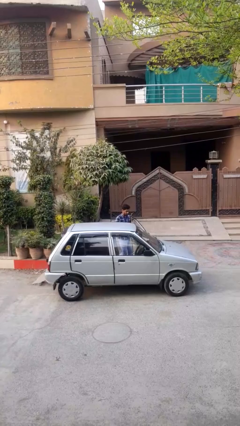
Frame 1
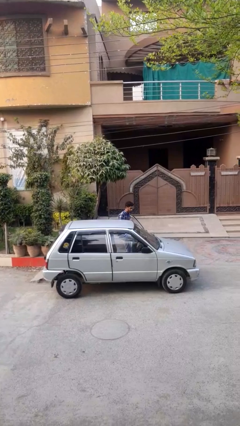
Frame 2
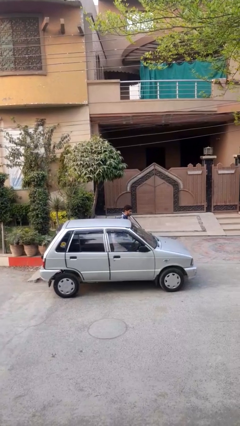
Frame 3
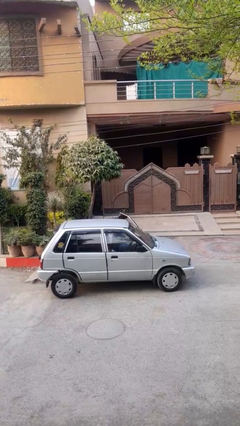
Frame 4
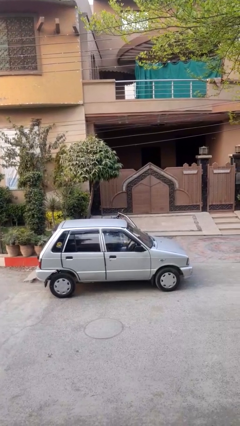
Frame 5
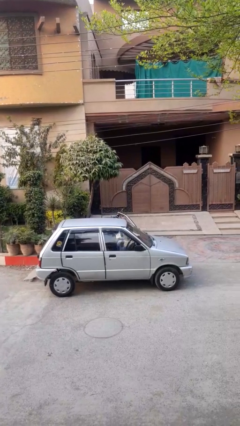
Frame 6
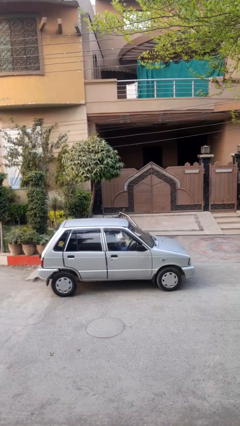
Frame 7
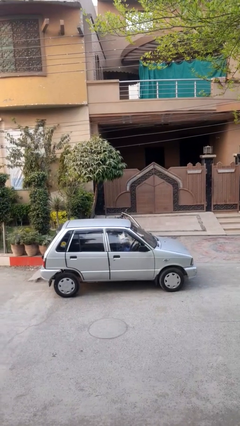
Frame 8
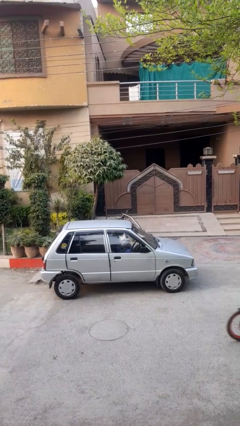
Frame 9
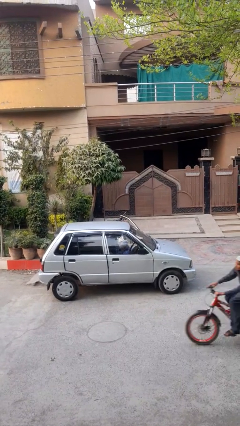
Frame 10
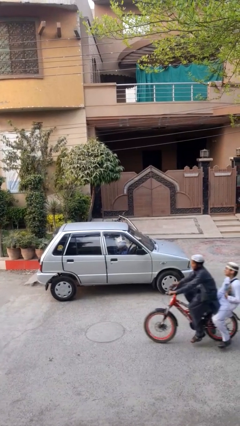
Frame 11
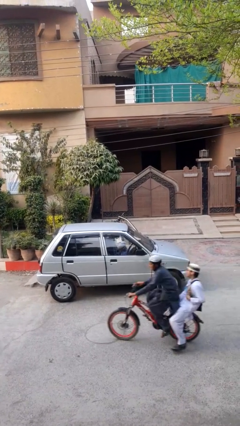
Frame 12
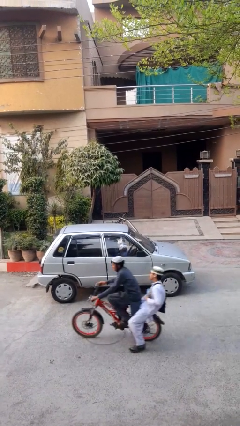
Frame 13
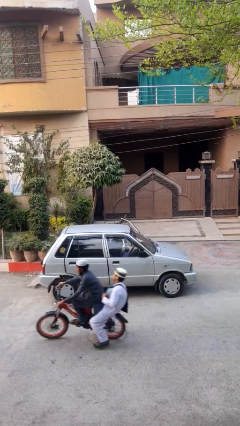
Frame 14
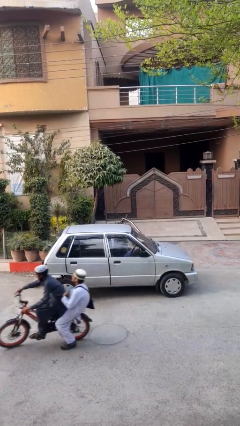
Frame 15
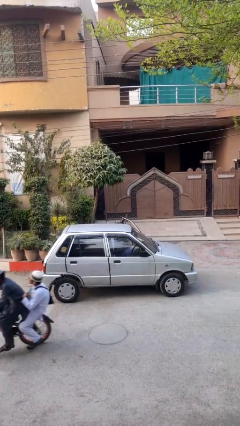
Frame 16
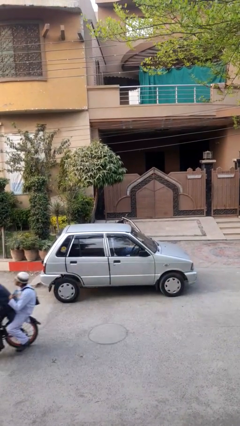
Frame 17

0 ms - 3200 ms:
person enters car

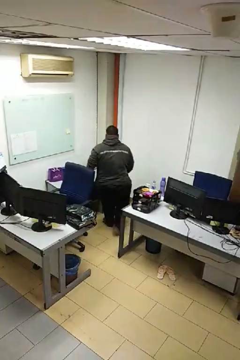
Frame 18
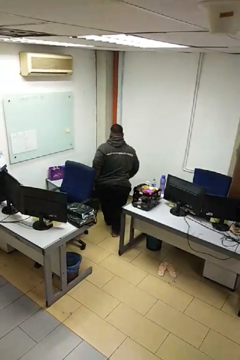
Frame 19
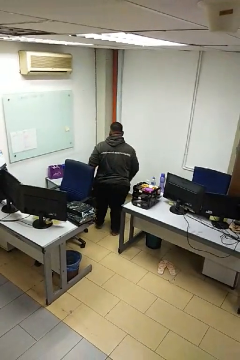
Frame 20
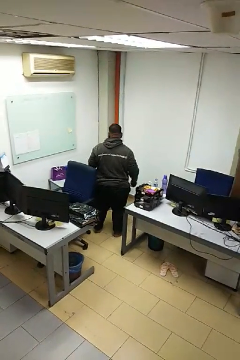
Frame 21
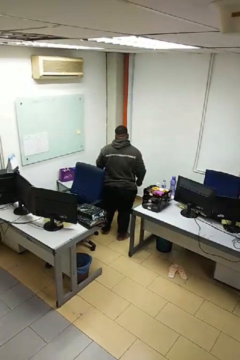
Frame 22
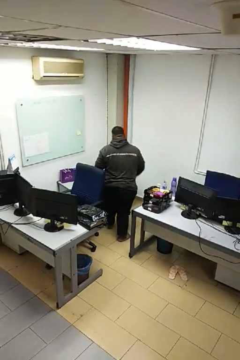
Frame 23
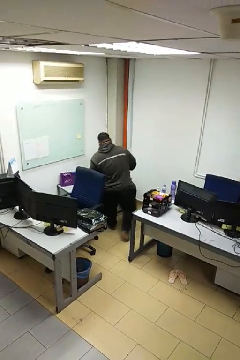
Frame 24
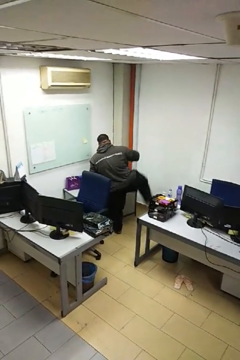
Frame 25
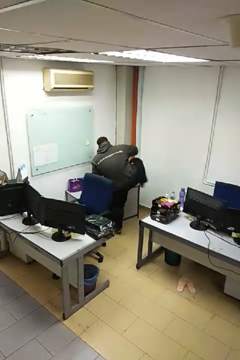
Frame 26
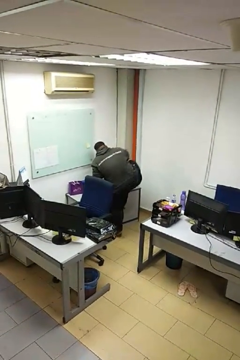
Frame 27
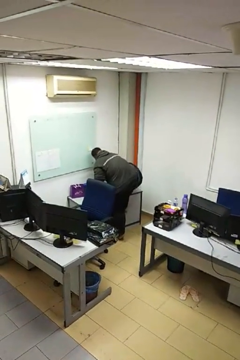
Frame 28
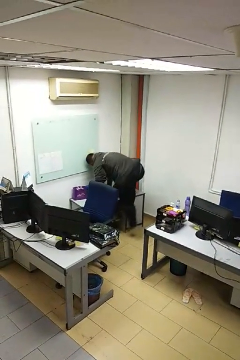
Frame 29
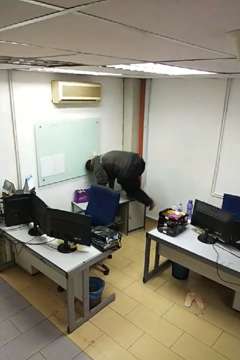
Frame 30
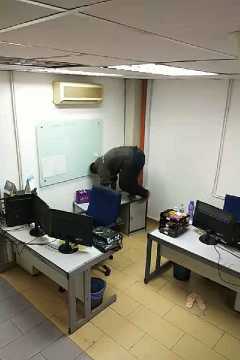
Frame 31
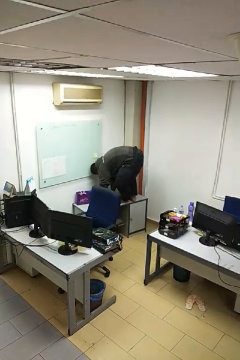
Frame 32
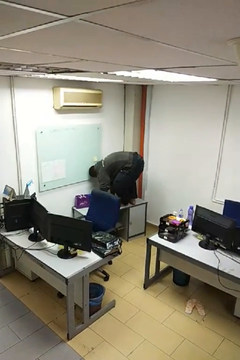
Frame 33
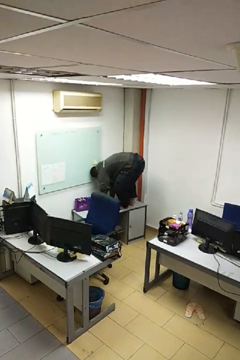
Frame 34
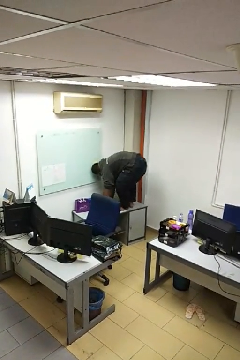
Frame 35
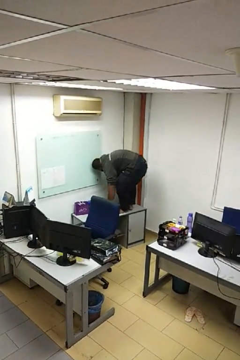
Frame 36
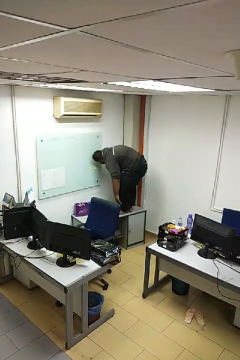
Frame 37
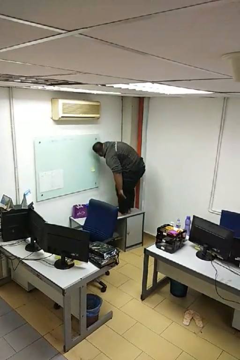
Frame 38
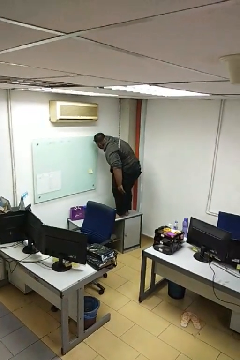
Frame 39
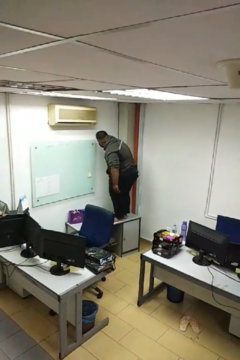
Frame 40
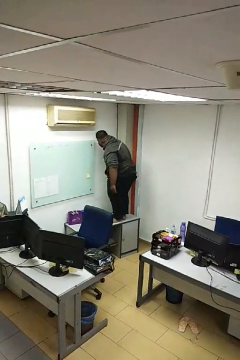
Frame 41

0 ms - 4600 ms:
person climbs on table

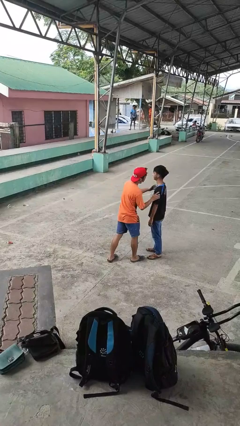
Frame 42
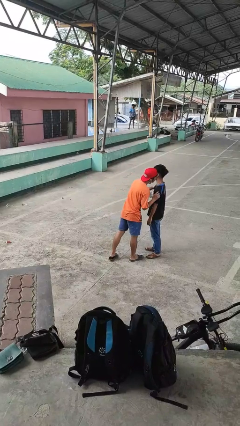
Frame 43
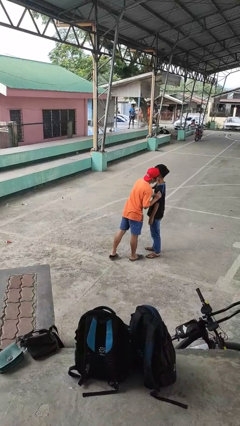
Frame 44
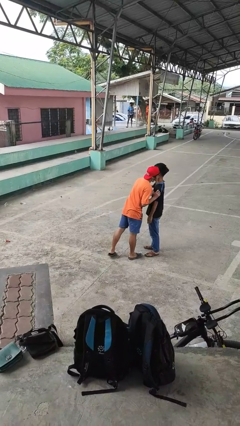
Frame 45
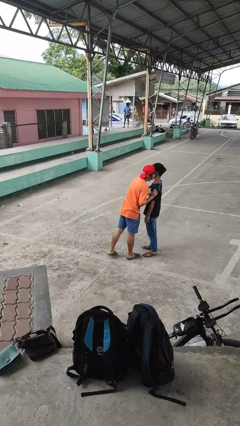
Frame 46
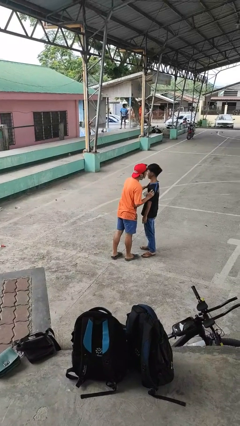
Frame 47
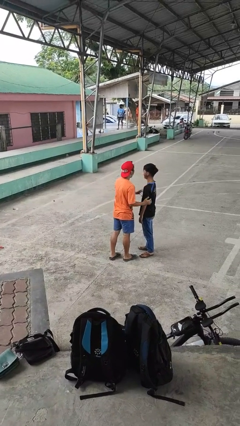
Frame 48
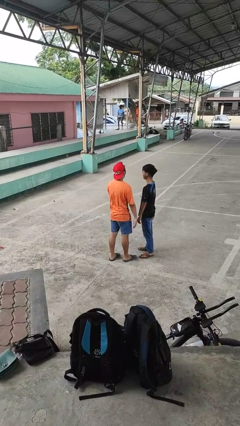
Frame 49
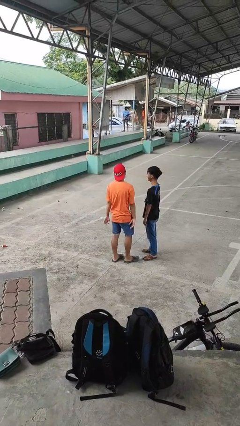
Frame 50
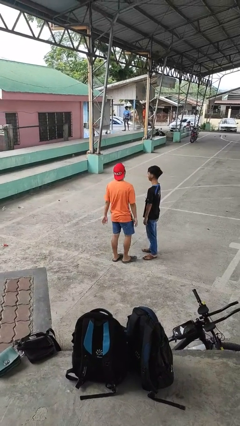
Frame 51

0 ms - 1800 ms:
person kisses cheek of person

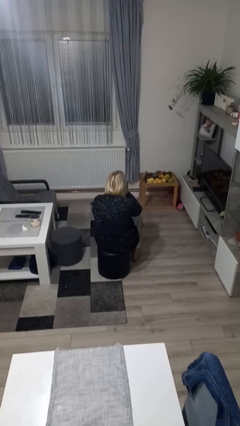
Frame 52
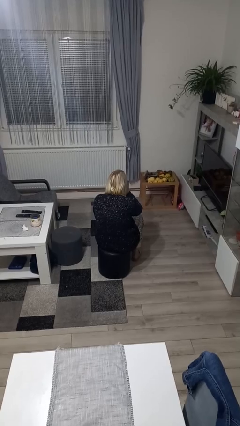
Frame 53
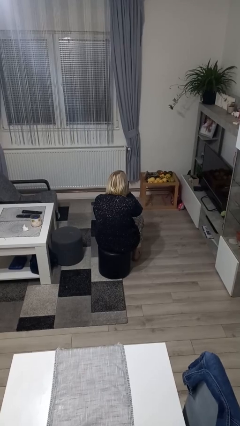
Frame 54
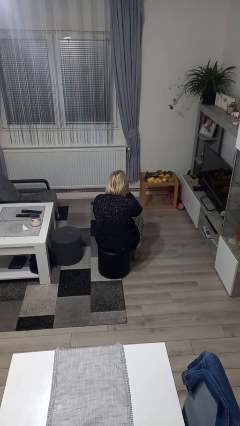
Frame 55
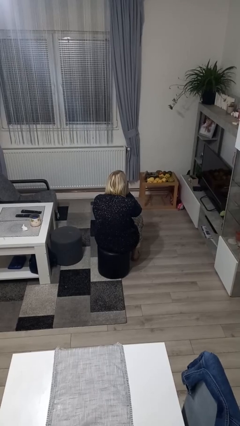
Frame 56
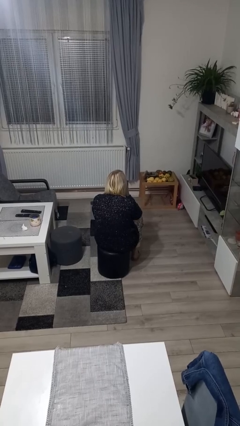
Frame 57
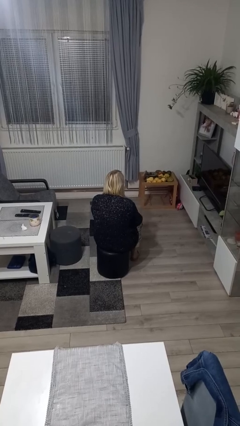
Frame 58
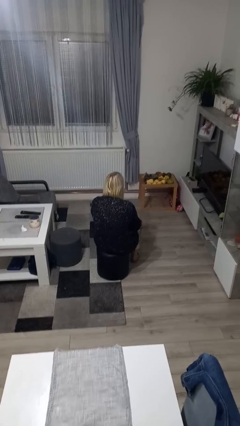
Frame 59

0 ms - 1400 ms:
person gestures be quiet

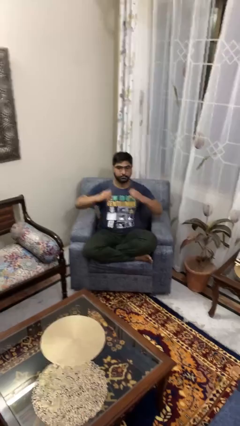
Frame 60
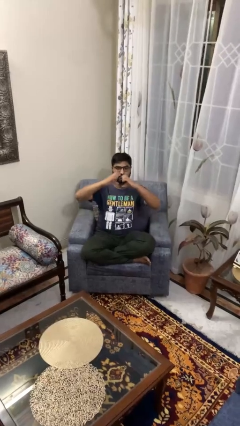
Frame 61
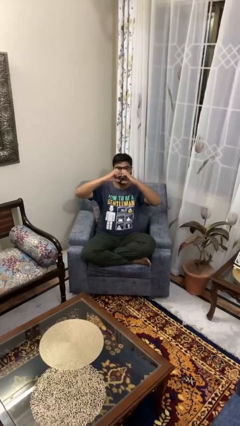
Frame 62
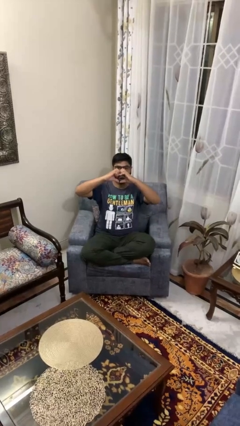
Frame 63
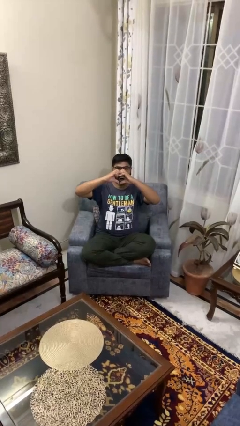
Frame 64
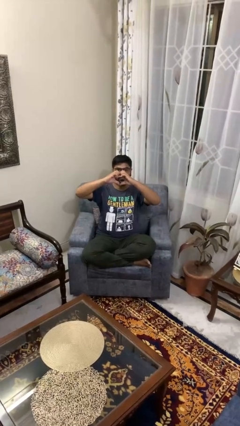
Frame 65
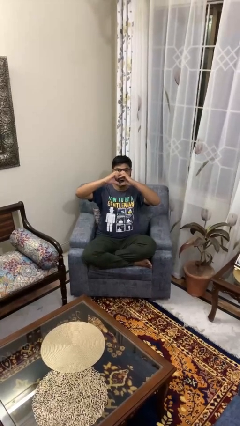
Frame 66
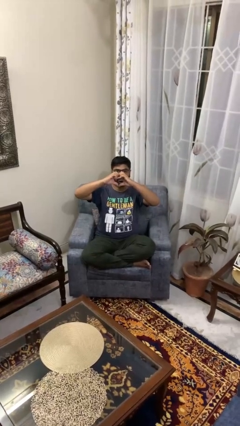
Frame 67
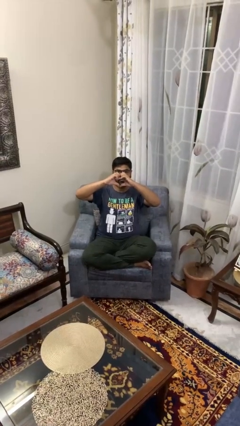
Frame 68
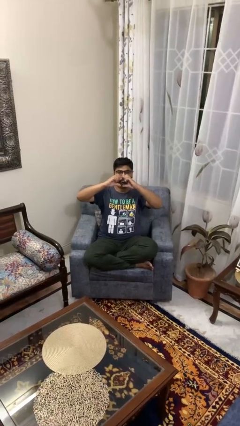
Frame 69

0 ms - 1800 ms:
person gestures heart

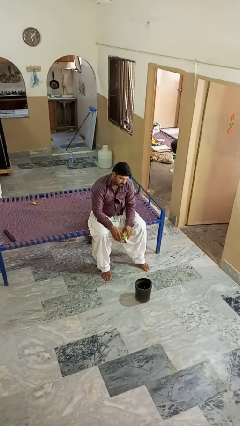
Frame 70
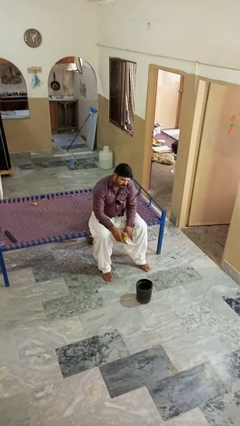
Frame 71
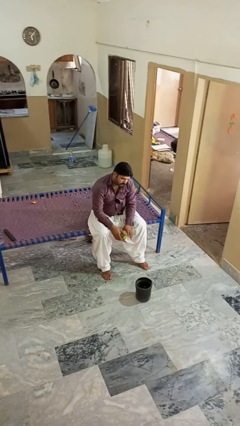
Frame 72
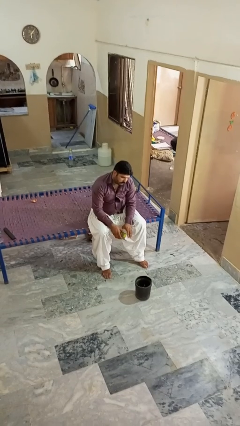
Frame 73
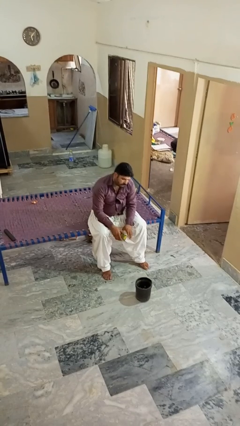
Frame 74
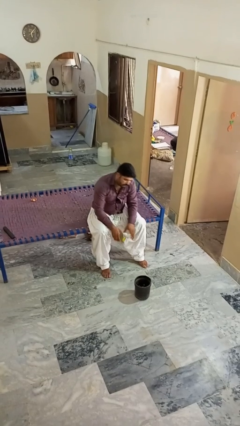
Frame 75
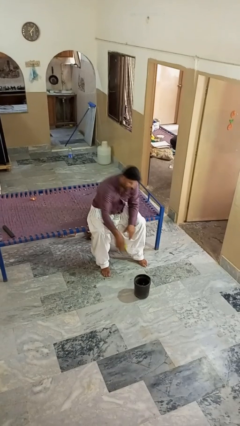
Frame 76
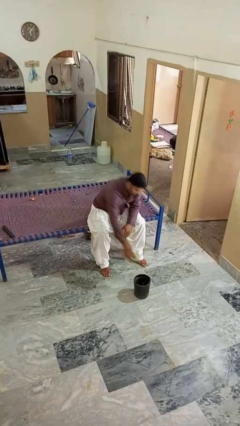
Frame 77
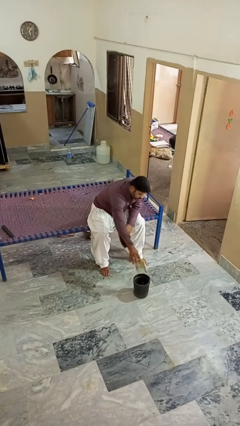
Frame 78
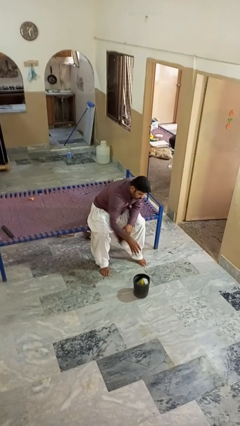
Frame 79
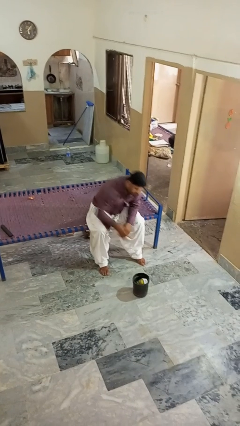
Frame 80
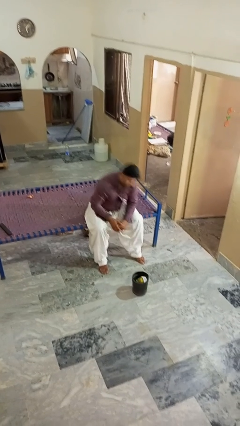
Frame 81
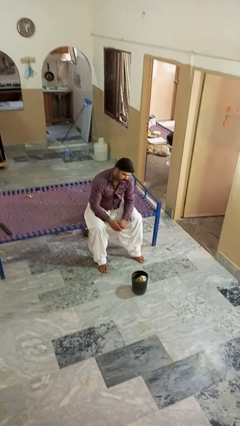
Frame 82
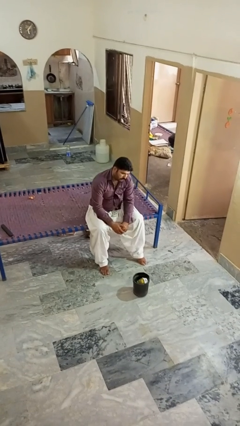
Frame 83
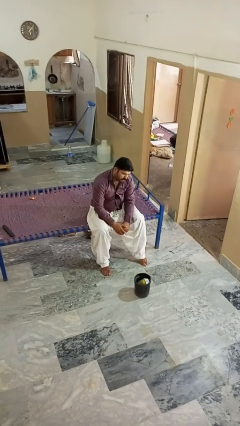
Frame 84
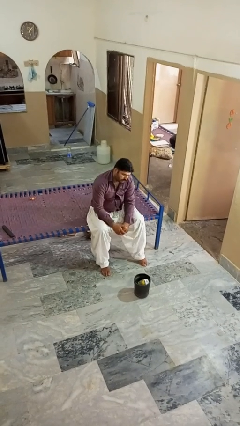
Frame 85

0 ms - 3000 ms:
person puts object into basket

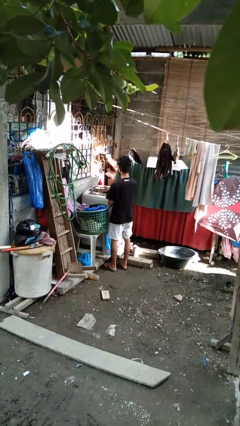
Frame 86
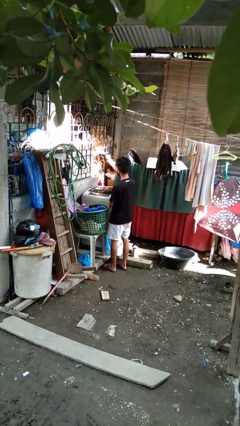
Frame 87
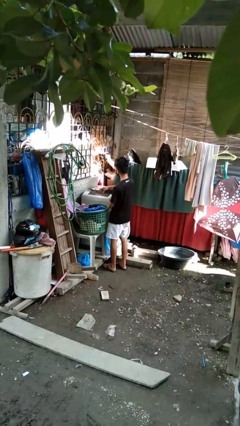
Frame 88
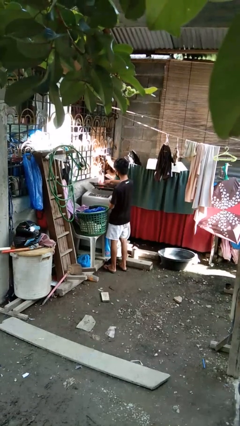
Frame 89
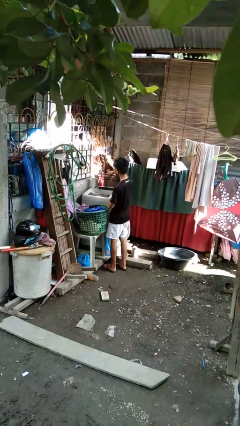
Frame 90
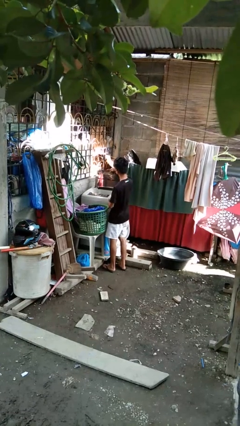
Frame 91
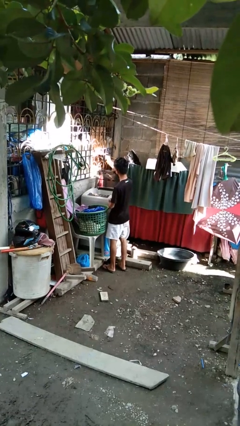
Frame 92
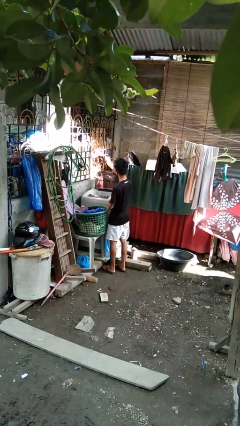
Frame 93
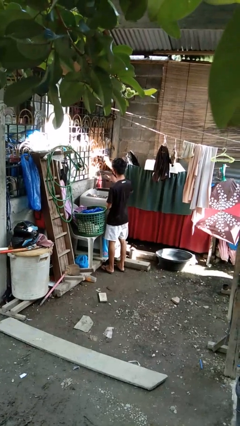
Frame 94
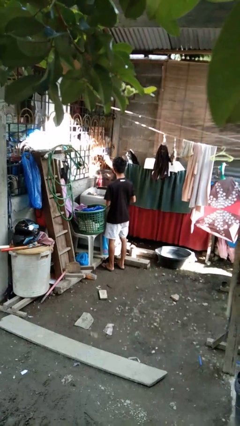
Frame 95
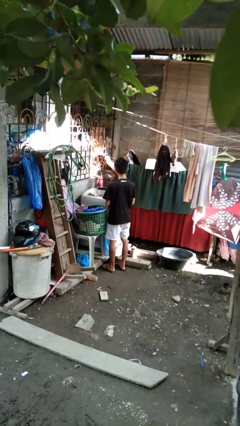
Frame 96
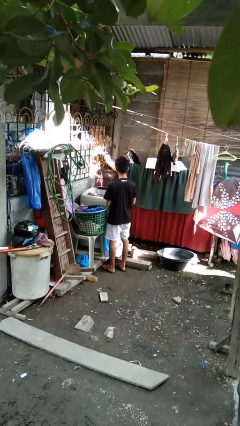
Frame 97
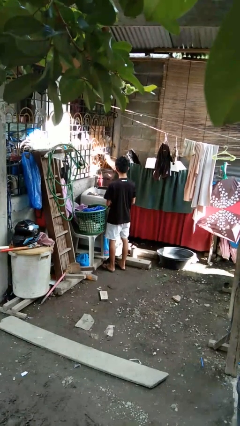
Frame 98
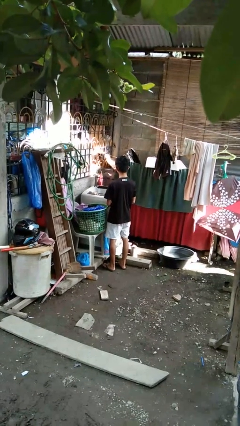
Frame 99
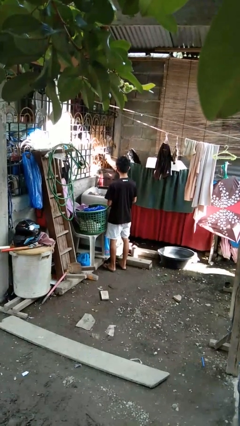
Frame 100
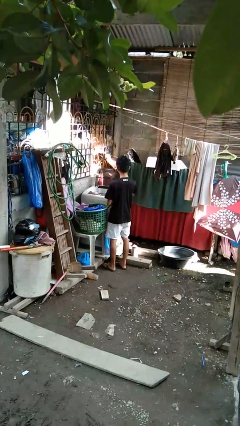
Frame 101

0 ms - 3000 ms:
person opens clothes washer
